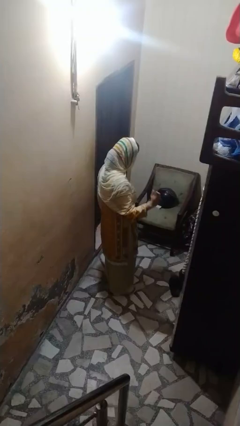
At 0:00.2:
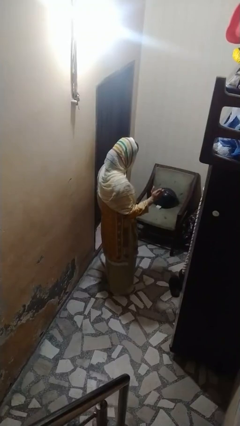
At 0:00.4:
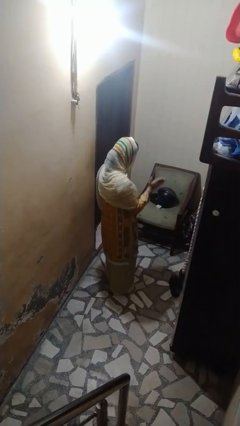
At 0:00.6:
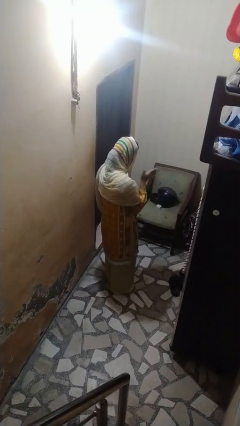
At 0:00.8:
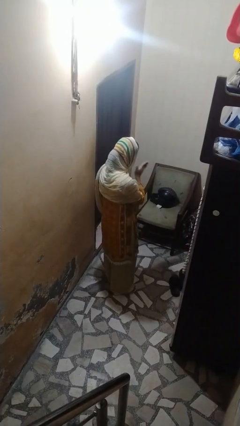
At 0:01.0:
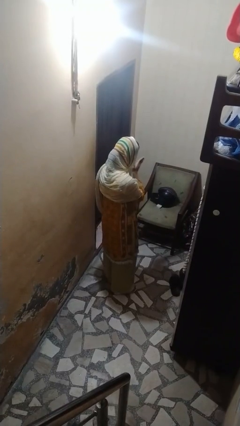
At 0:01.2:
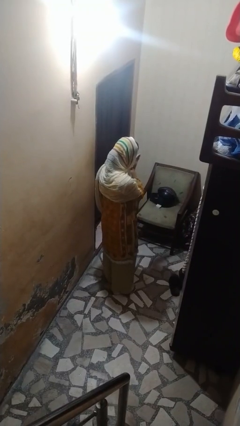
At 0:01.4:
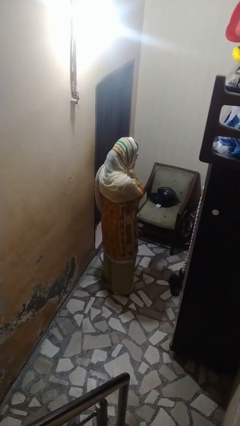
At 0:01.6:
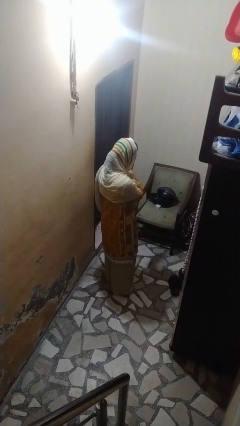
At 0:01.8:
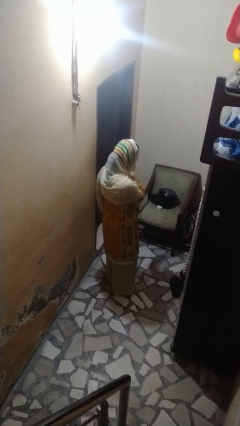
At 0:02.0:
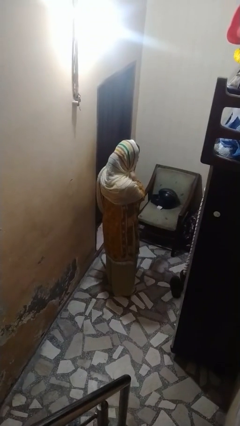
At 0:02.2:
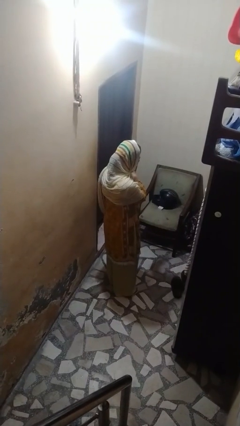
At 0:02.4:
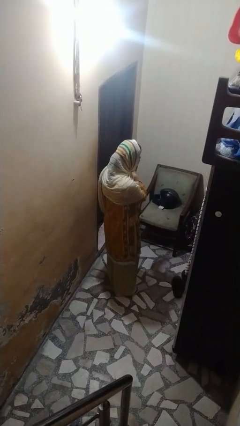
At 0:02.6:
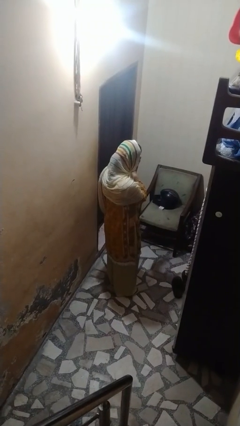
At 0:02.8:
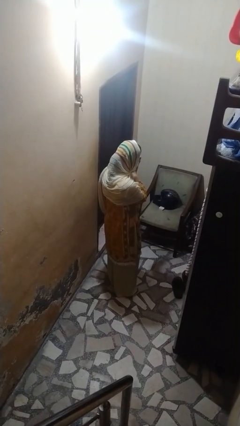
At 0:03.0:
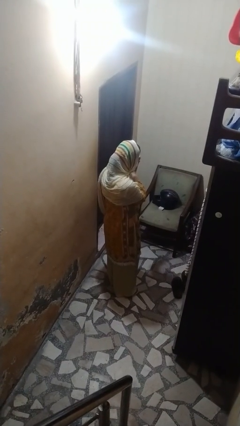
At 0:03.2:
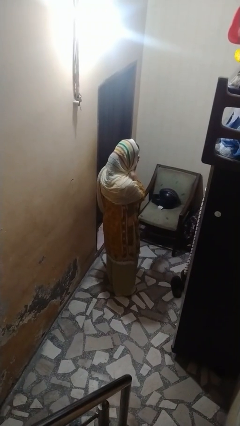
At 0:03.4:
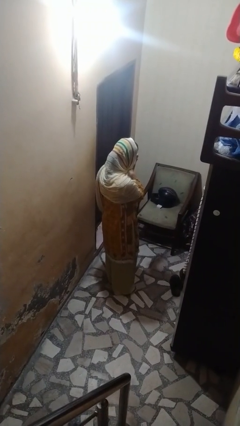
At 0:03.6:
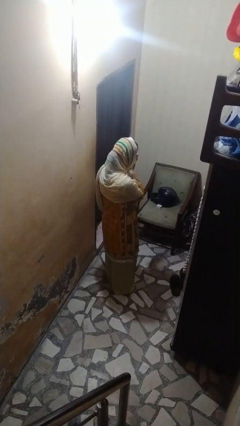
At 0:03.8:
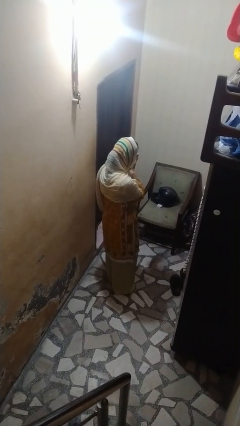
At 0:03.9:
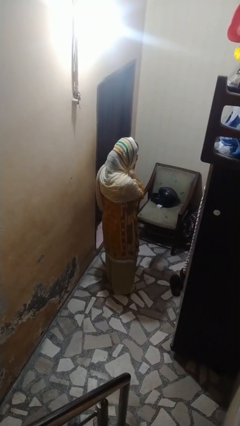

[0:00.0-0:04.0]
person gestures swipe left

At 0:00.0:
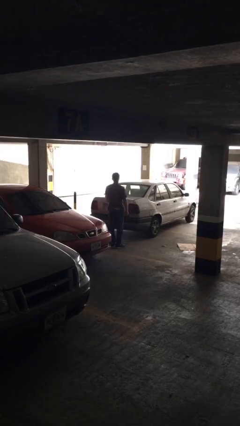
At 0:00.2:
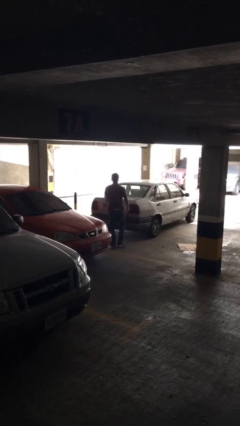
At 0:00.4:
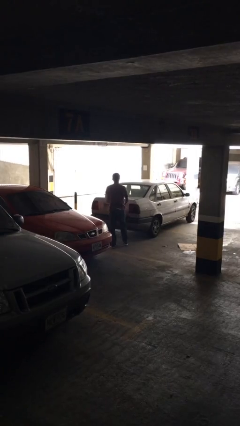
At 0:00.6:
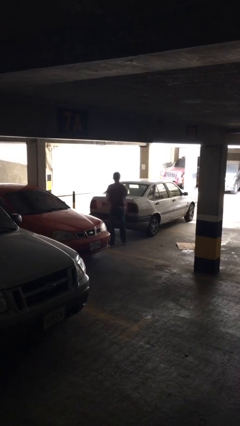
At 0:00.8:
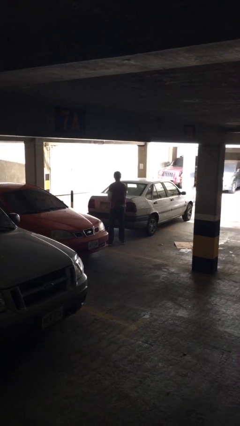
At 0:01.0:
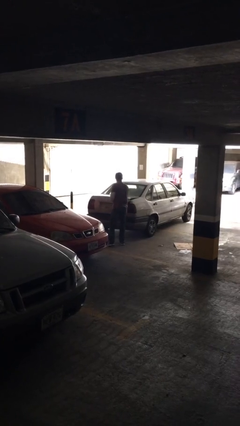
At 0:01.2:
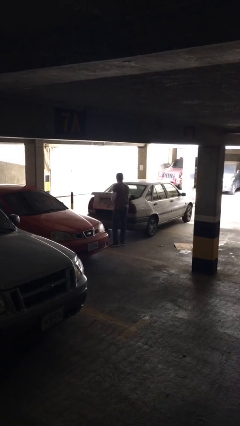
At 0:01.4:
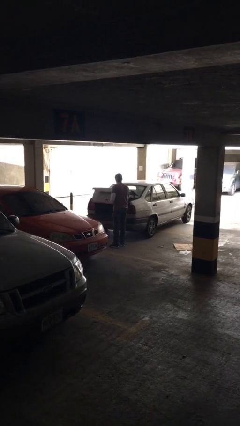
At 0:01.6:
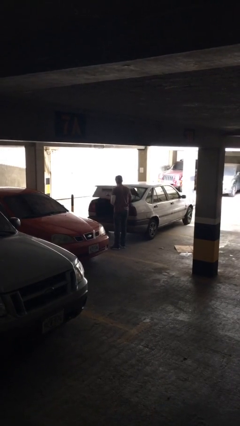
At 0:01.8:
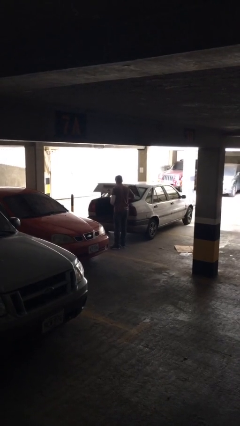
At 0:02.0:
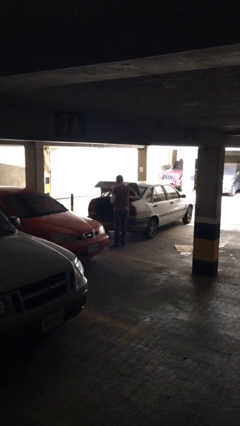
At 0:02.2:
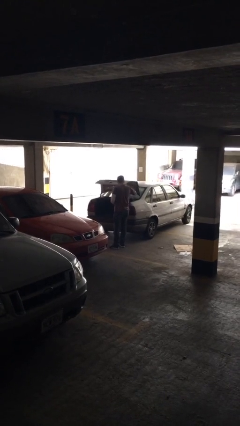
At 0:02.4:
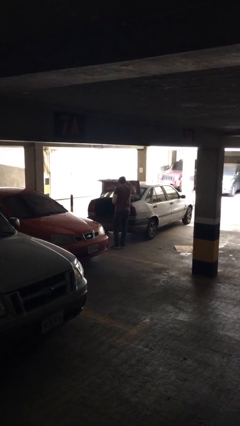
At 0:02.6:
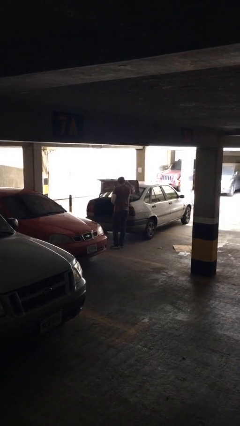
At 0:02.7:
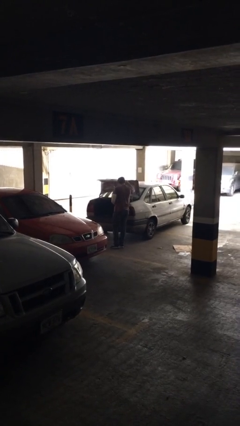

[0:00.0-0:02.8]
person opens car trunk

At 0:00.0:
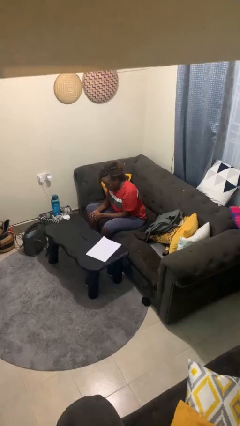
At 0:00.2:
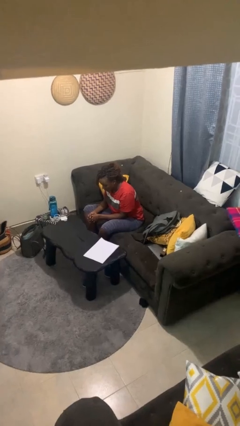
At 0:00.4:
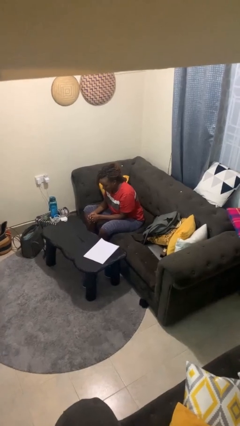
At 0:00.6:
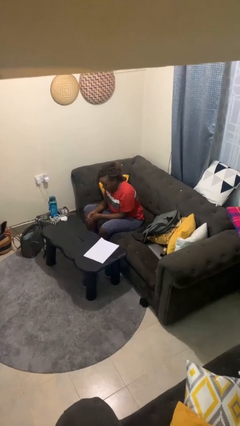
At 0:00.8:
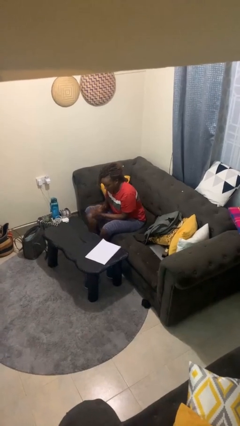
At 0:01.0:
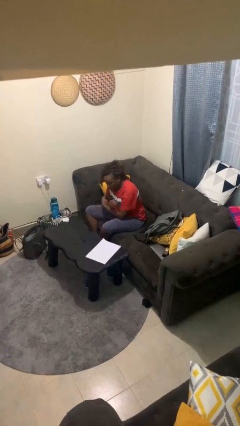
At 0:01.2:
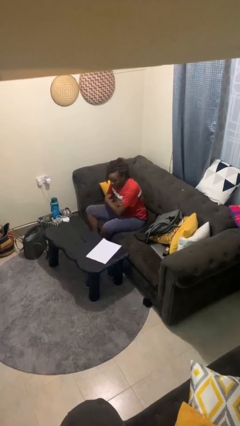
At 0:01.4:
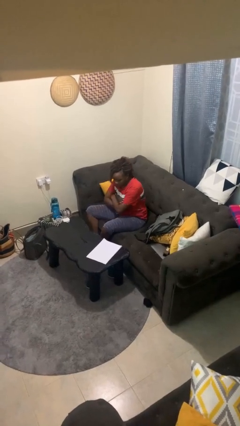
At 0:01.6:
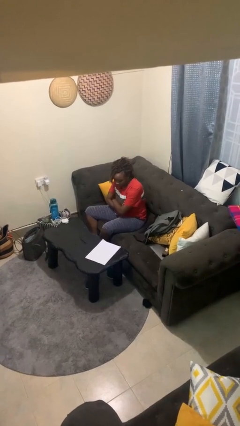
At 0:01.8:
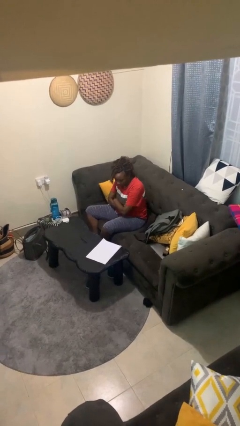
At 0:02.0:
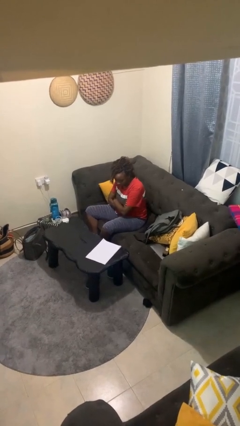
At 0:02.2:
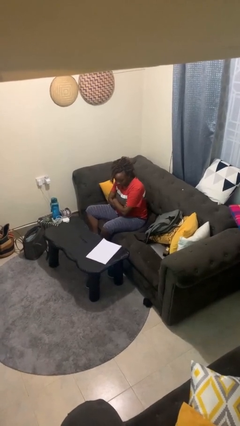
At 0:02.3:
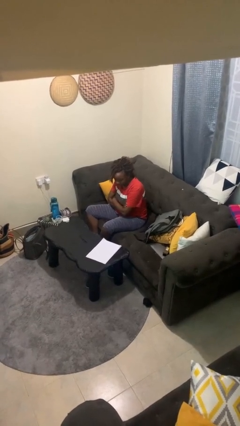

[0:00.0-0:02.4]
person crosses arms

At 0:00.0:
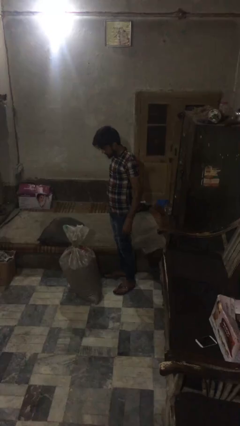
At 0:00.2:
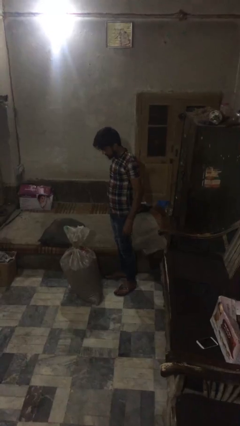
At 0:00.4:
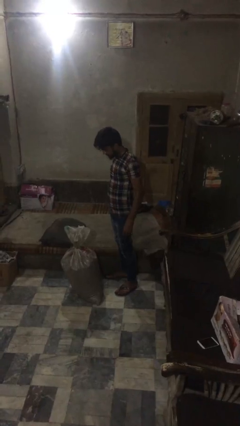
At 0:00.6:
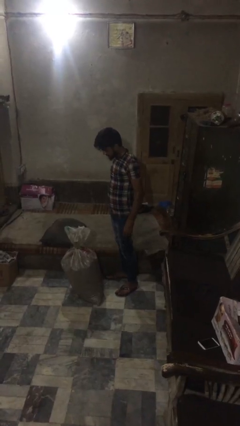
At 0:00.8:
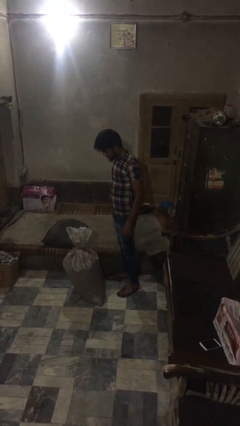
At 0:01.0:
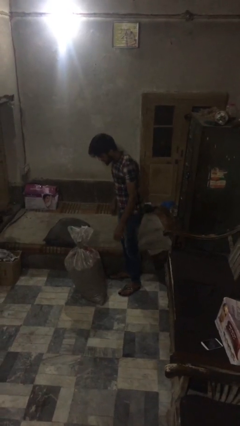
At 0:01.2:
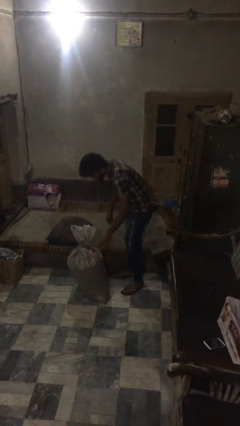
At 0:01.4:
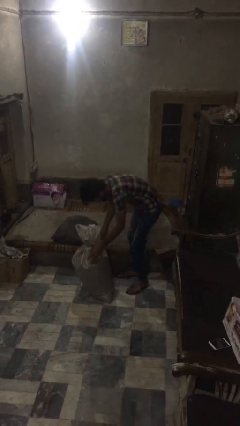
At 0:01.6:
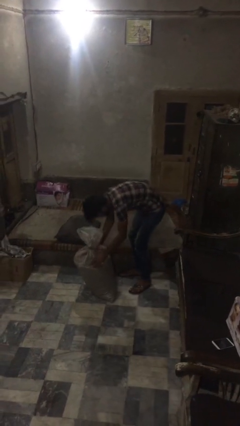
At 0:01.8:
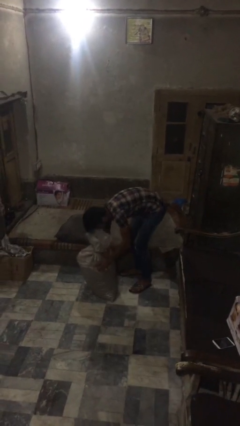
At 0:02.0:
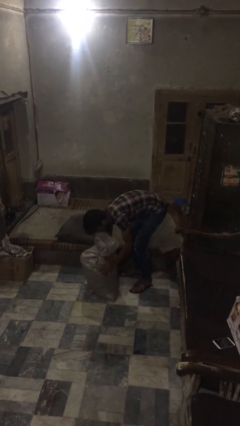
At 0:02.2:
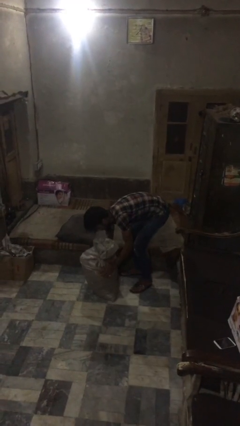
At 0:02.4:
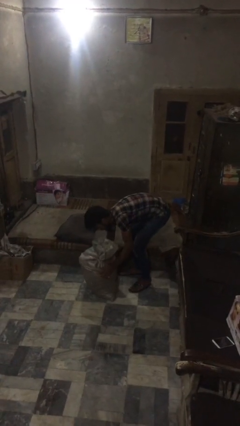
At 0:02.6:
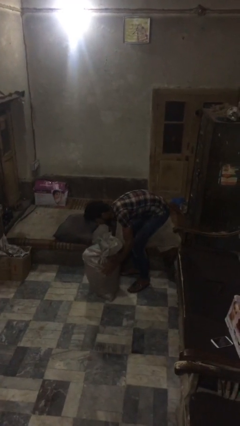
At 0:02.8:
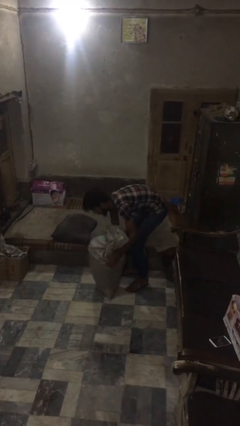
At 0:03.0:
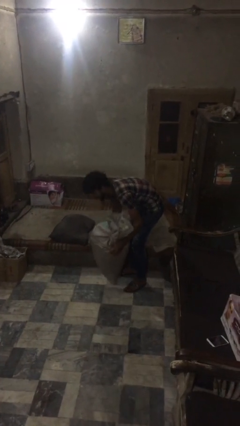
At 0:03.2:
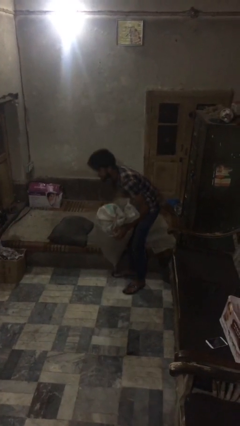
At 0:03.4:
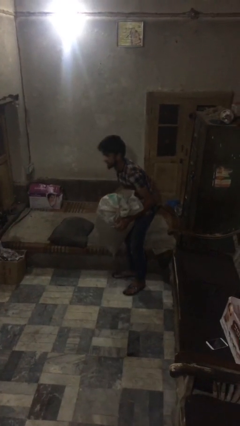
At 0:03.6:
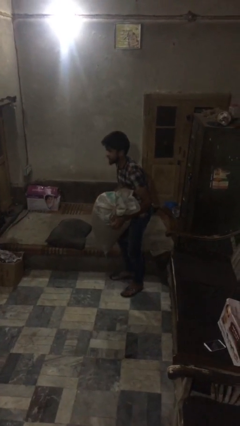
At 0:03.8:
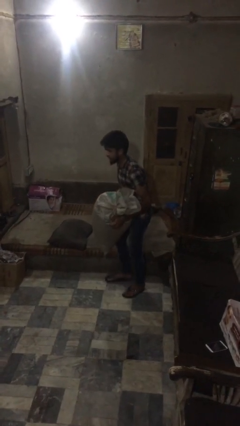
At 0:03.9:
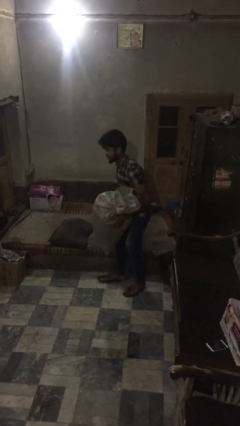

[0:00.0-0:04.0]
person picks up object from floor

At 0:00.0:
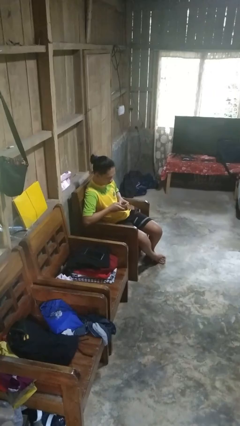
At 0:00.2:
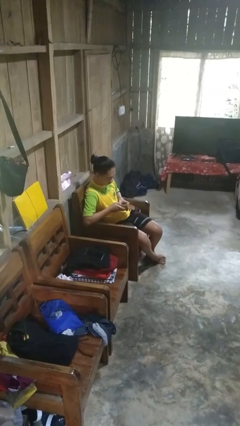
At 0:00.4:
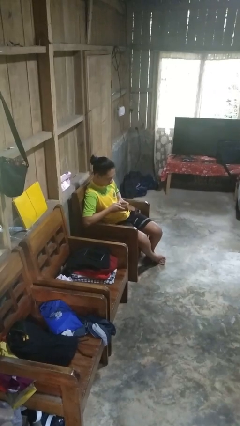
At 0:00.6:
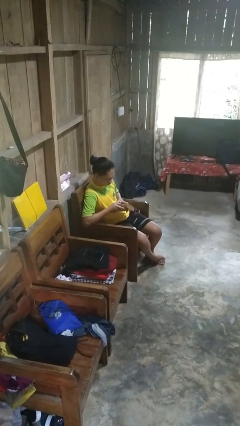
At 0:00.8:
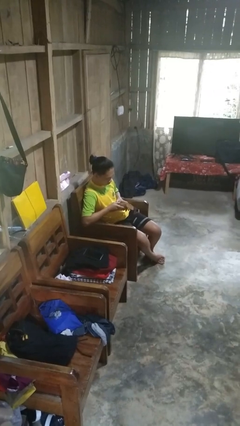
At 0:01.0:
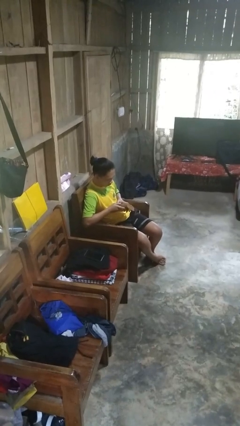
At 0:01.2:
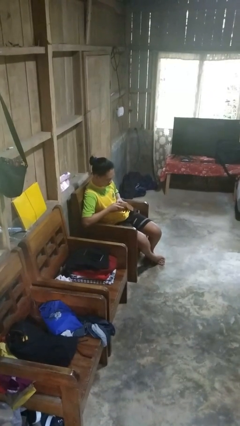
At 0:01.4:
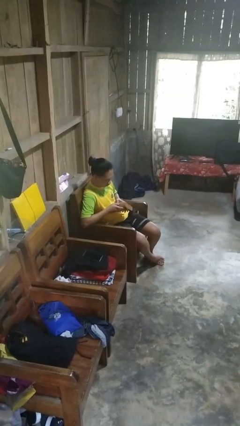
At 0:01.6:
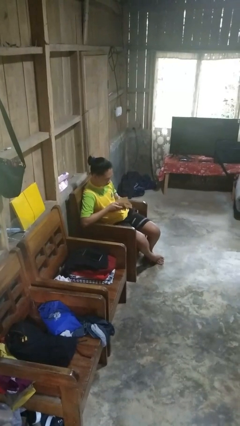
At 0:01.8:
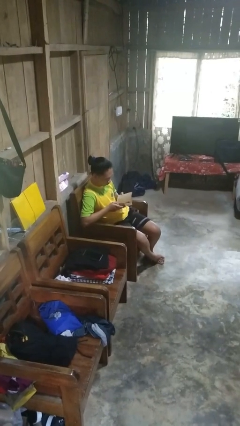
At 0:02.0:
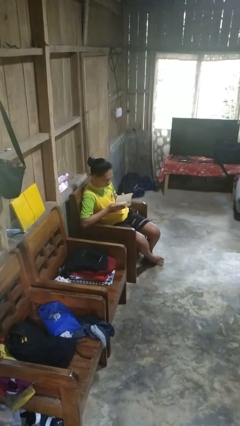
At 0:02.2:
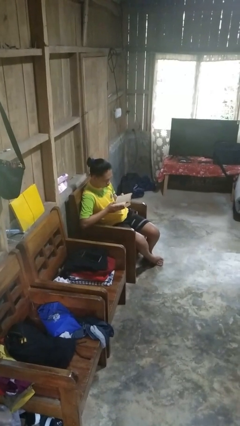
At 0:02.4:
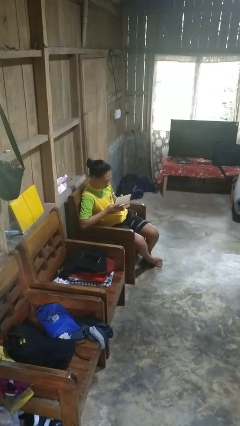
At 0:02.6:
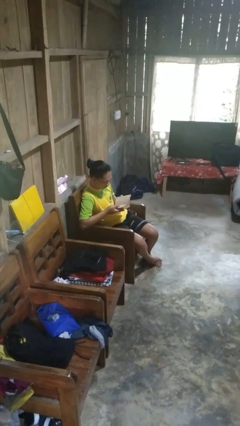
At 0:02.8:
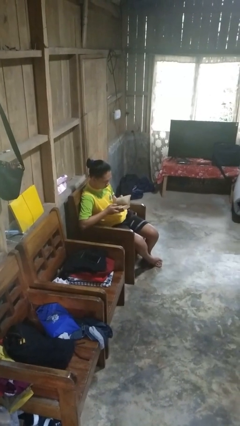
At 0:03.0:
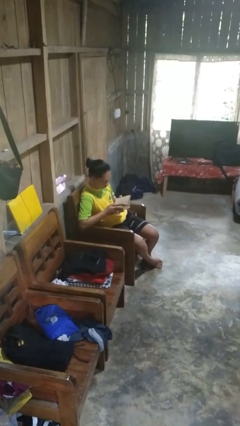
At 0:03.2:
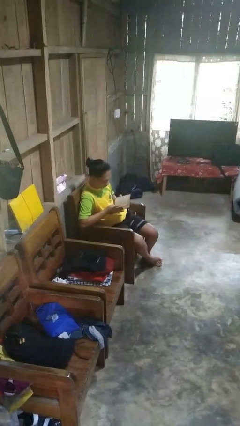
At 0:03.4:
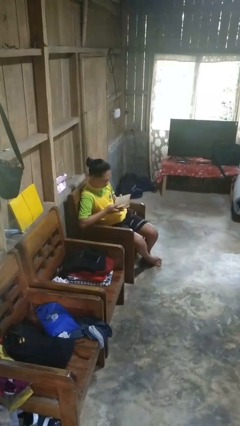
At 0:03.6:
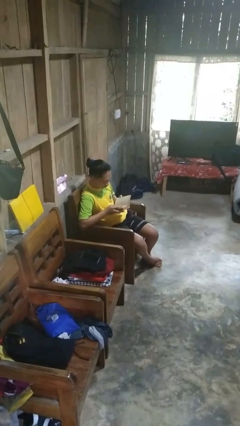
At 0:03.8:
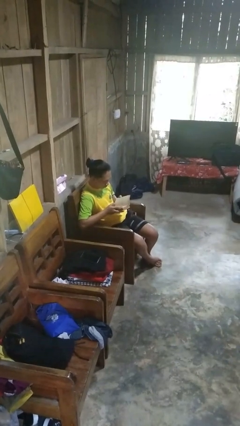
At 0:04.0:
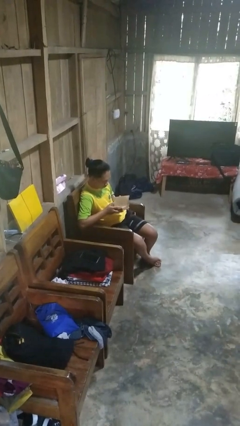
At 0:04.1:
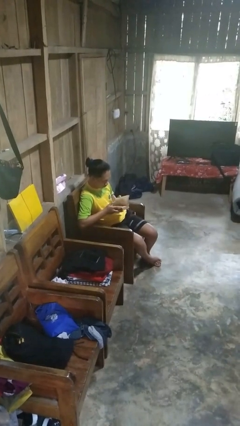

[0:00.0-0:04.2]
person reads book

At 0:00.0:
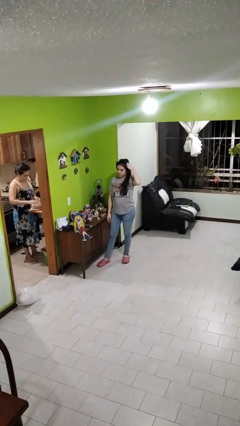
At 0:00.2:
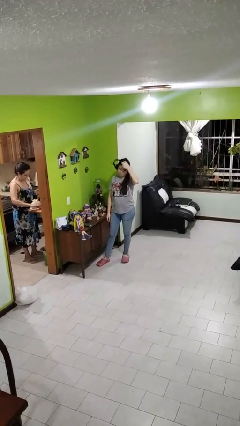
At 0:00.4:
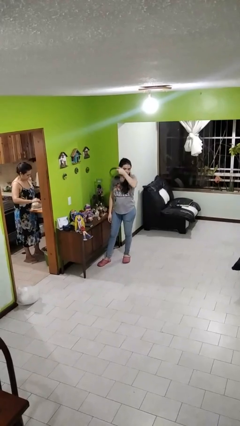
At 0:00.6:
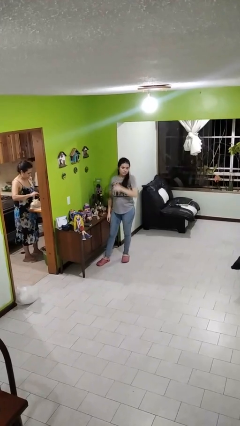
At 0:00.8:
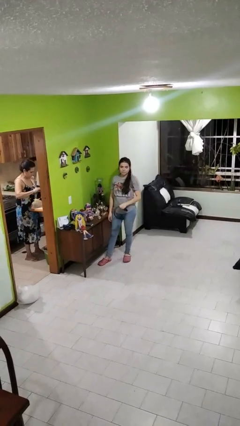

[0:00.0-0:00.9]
person takes off headphones
